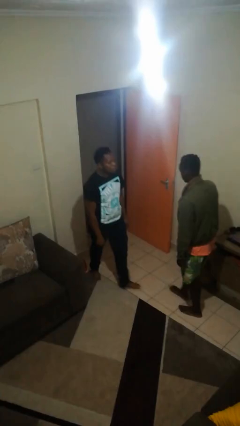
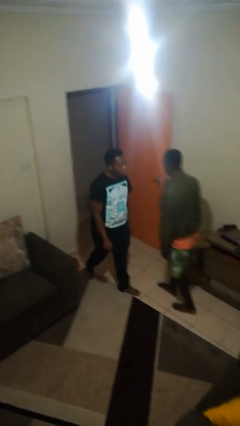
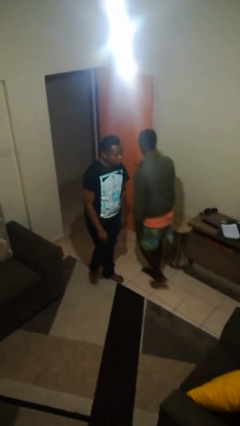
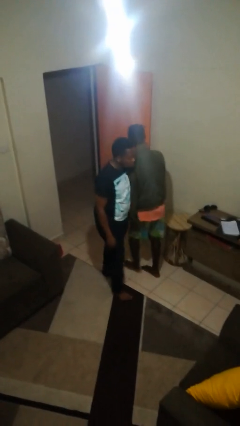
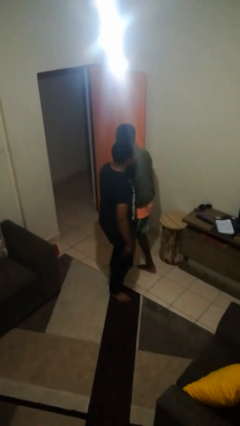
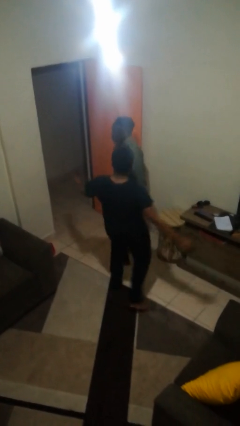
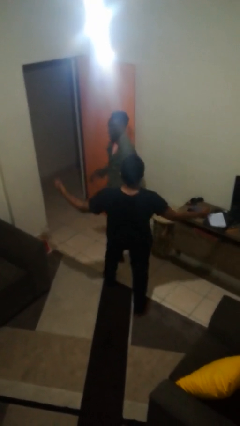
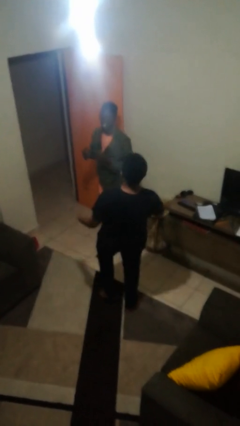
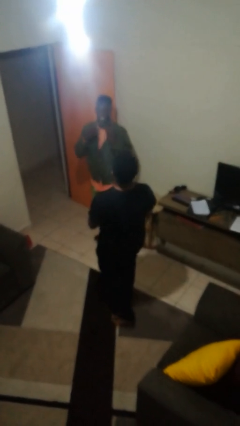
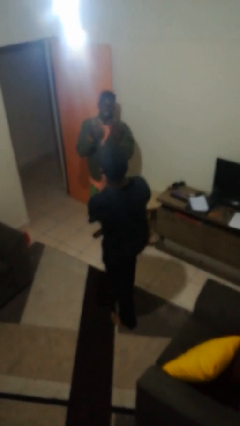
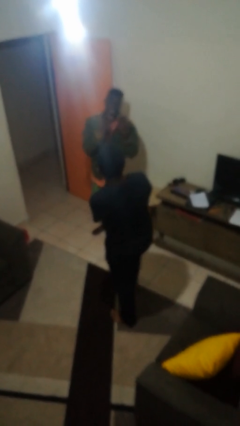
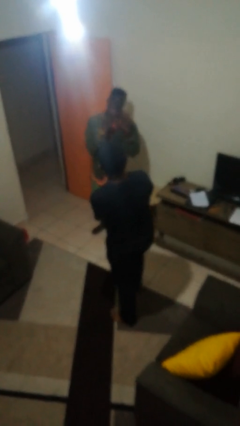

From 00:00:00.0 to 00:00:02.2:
person bumps into person

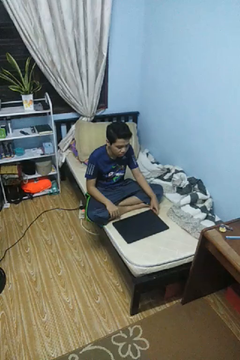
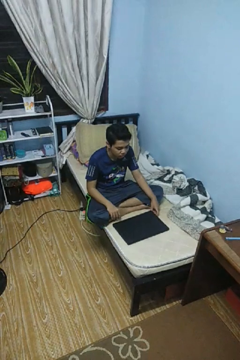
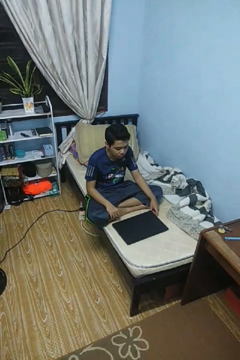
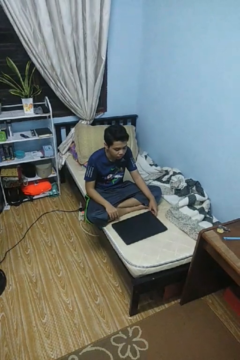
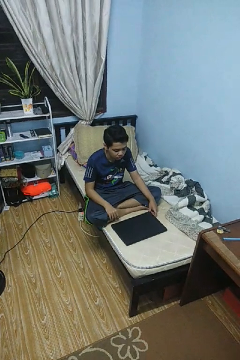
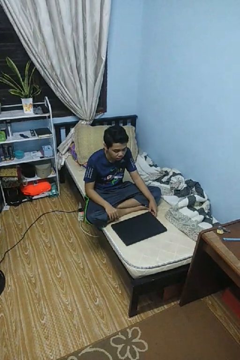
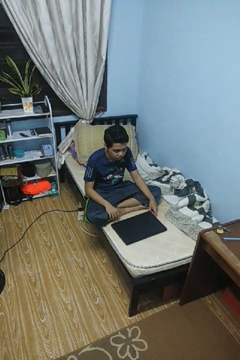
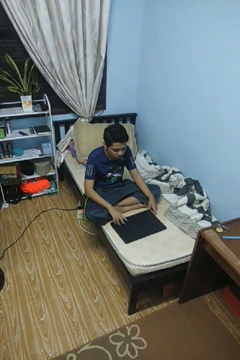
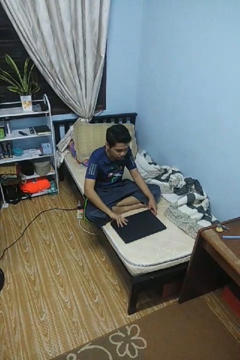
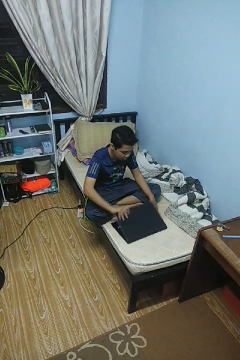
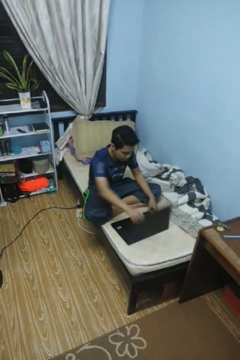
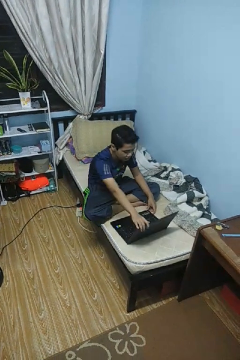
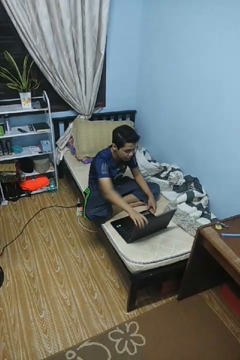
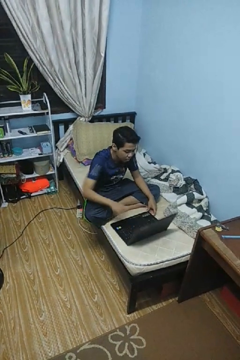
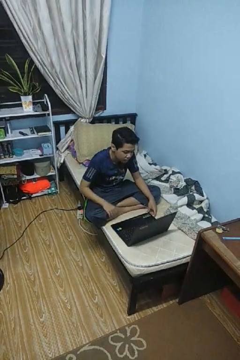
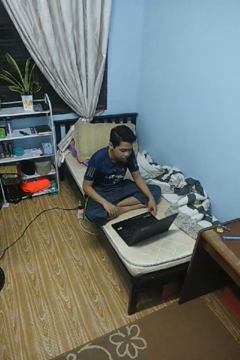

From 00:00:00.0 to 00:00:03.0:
person opens laptop

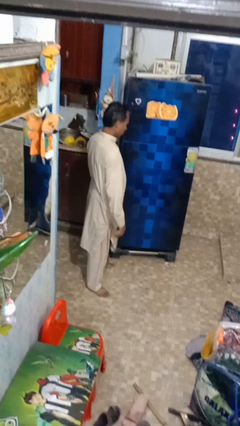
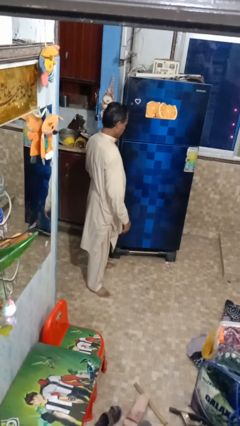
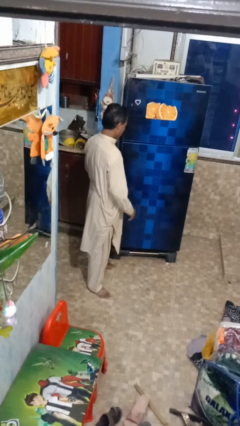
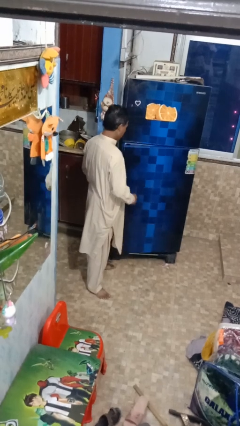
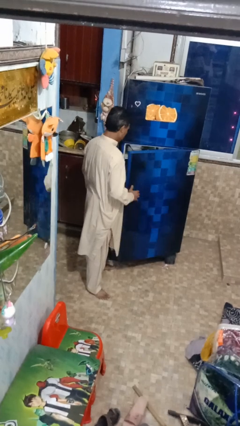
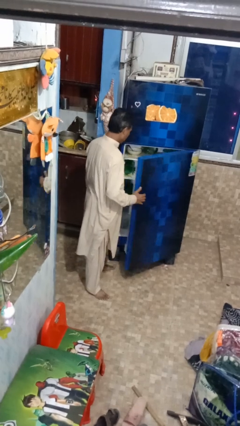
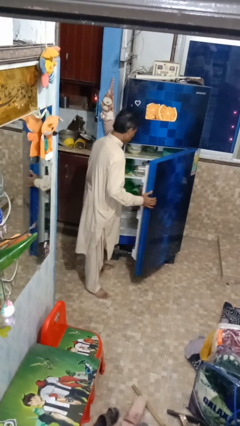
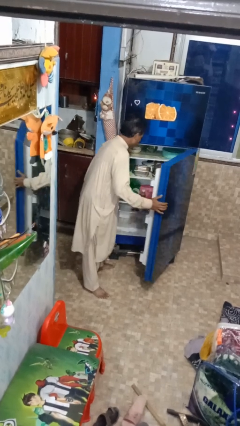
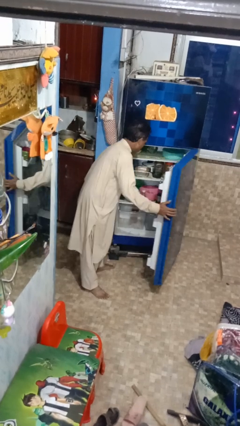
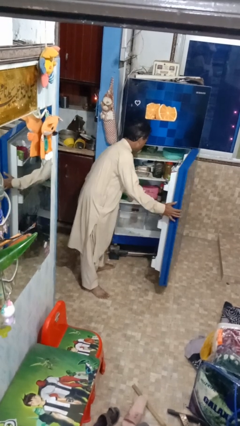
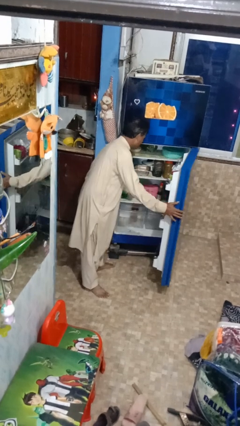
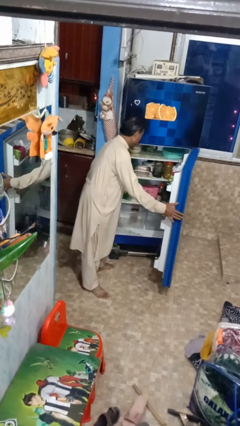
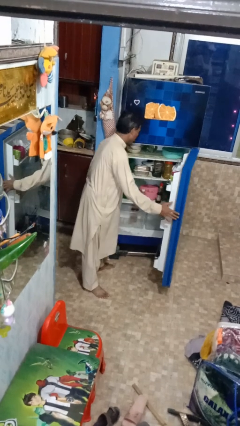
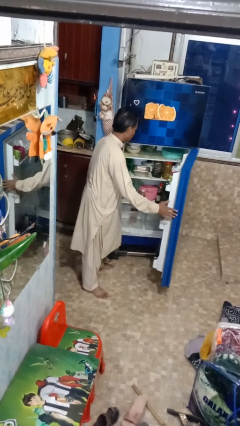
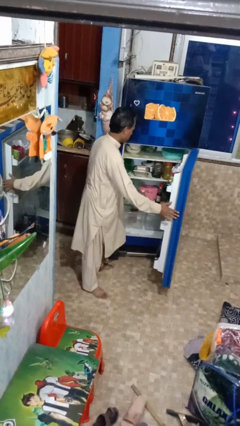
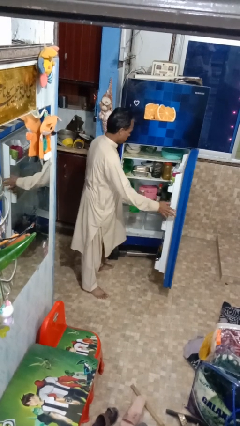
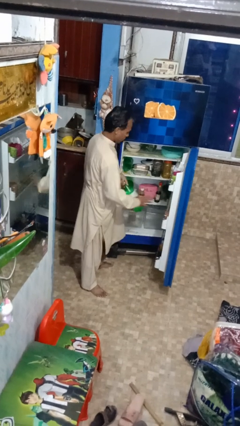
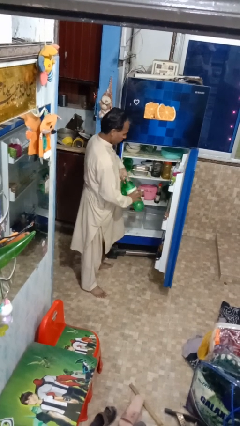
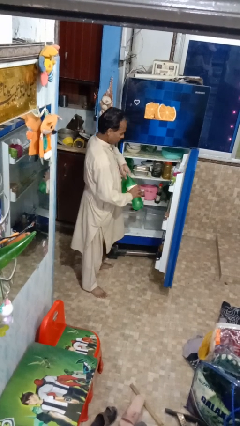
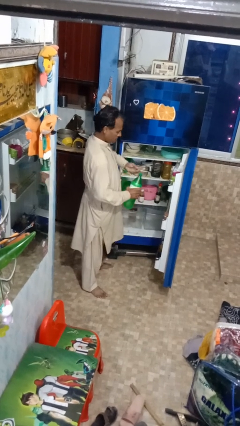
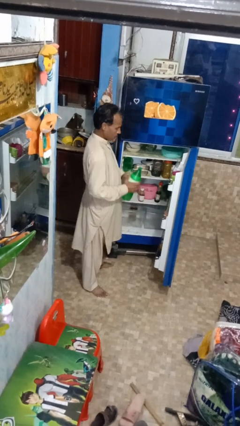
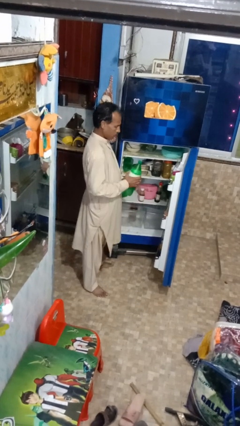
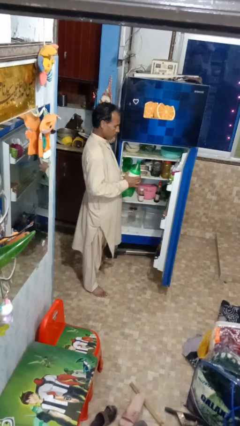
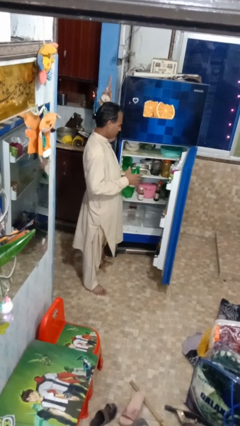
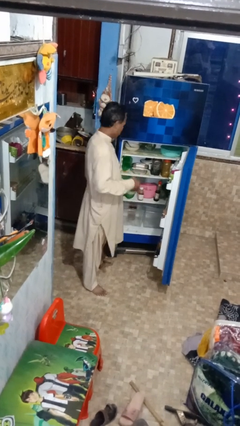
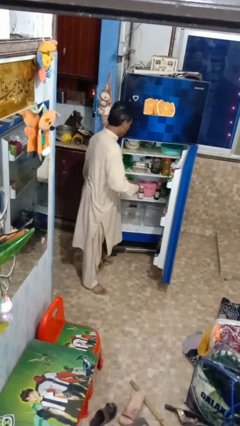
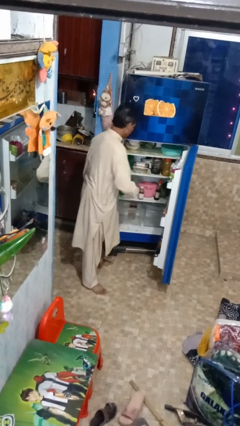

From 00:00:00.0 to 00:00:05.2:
person puts object into refrigerator

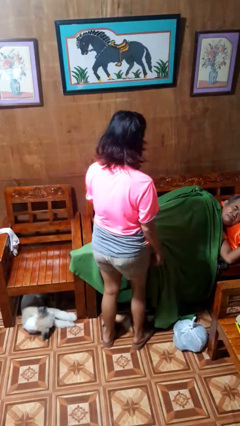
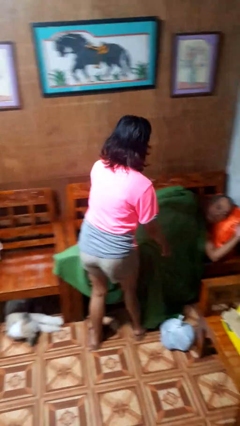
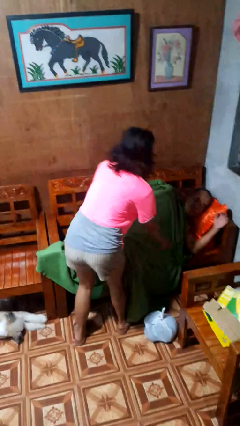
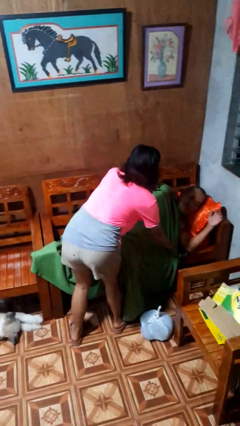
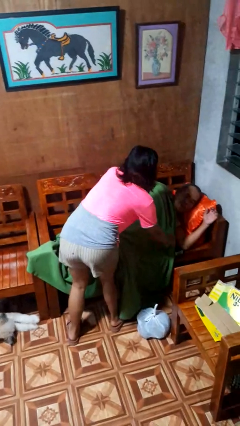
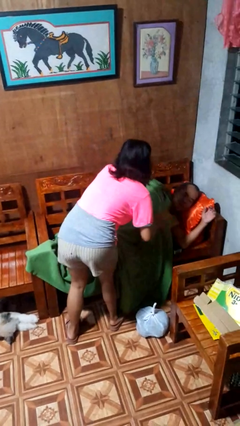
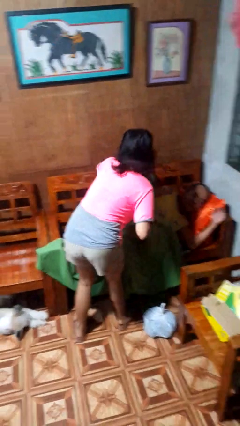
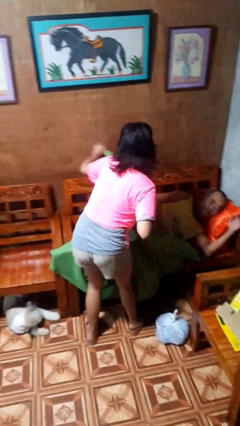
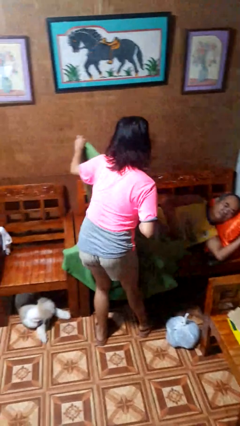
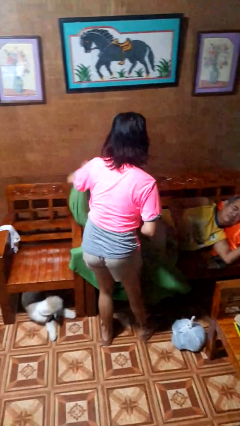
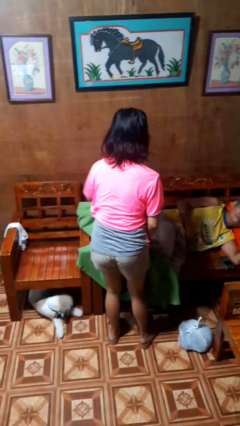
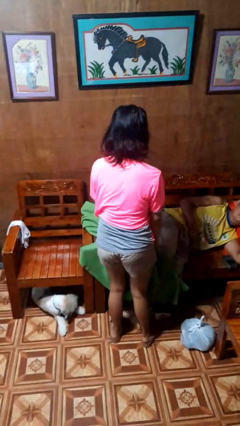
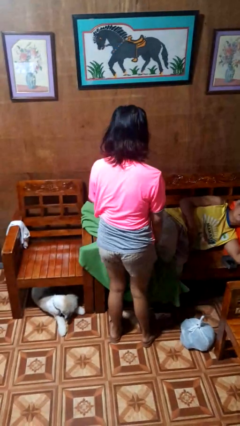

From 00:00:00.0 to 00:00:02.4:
person uncovers friend with blanket

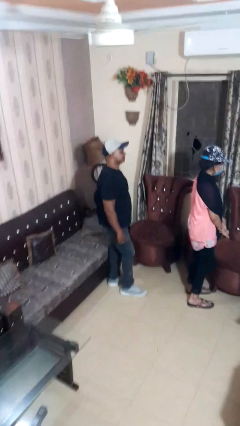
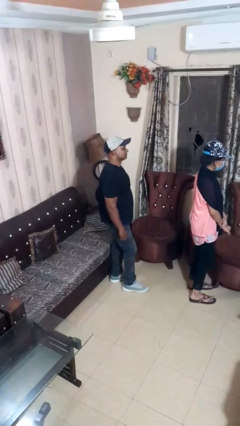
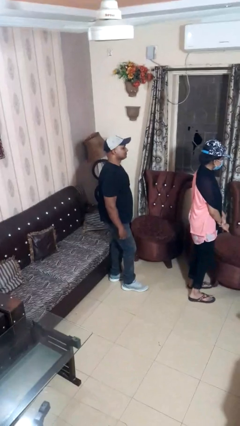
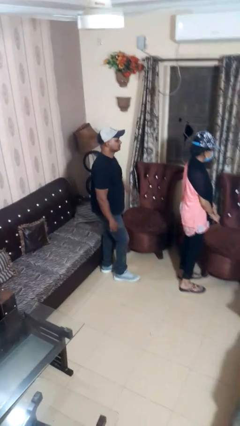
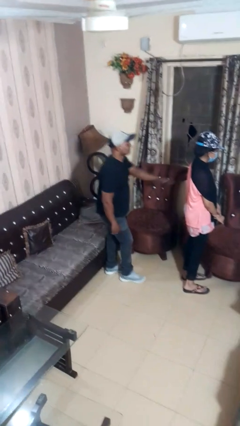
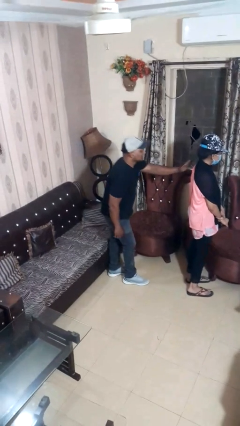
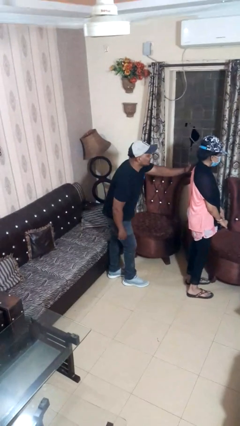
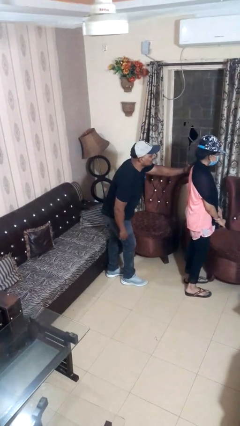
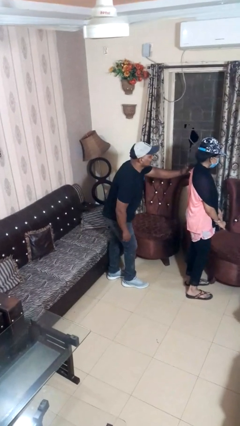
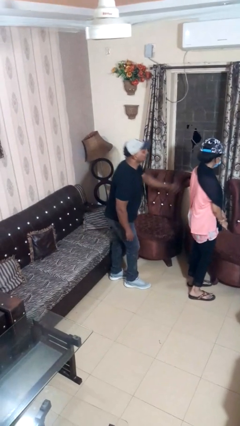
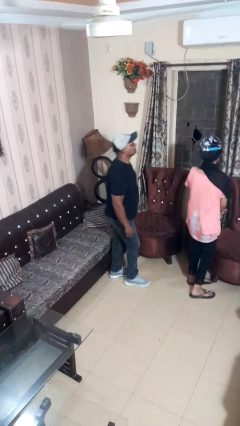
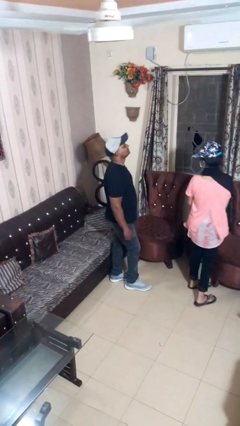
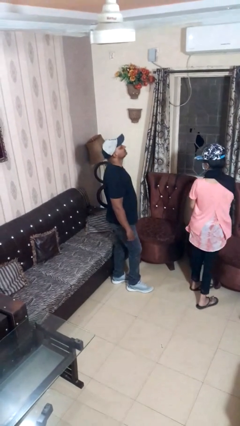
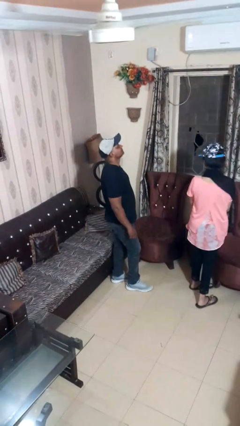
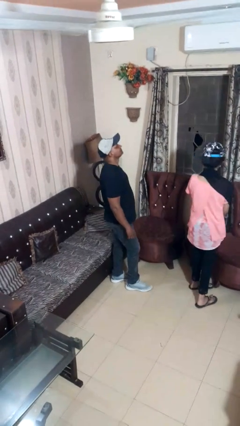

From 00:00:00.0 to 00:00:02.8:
person touches back of person

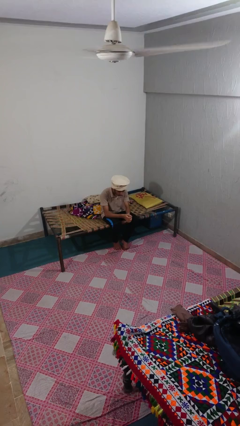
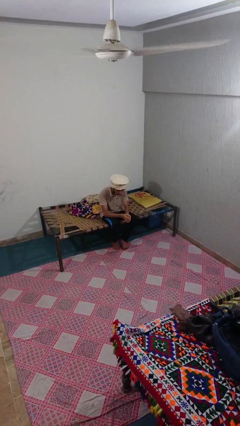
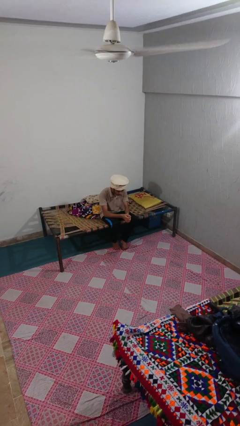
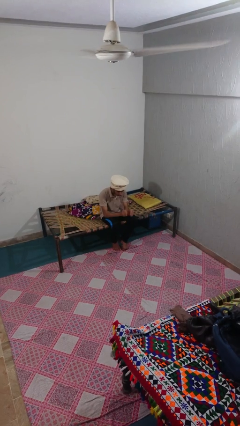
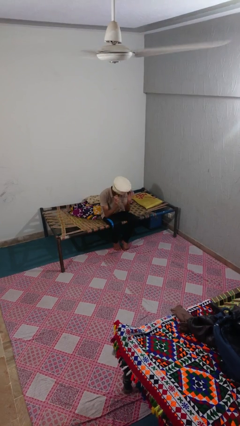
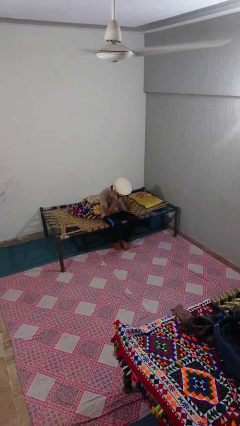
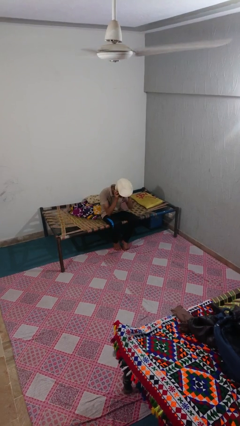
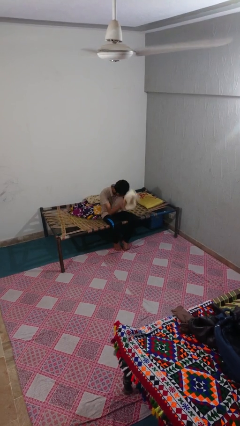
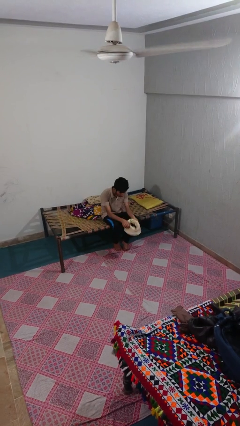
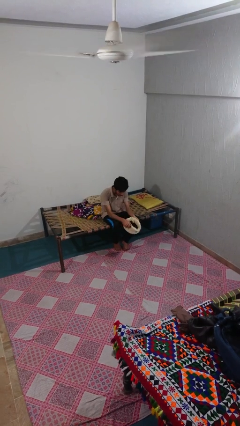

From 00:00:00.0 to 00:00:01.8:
person takes off hat
